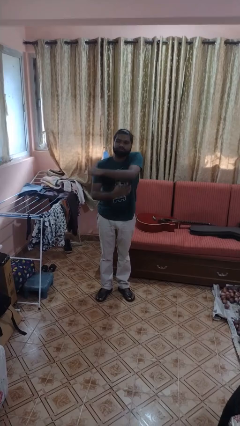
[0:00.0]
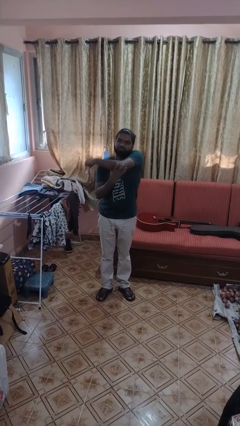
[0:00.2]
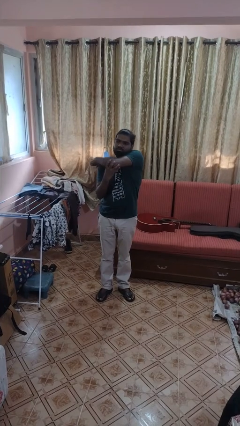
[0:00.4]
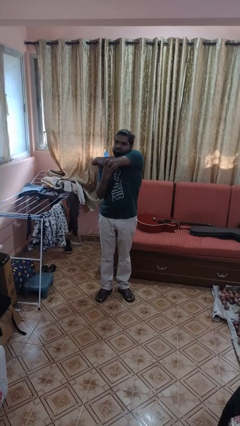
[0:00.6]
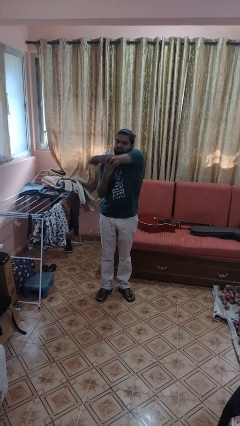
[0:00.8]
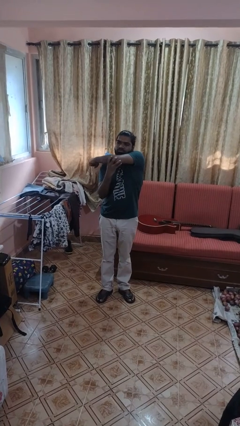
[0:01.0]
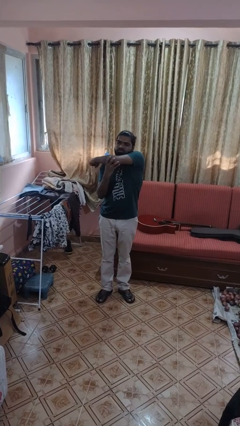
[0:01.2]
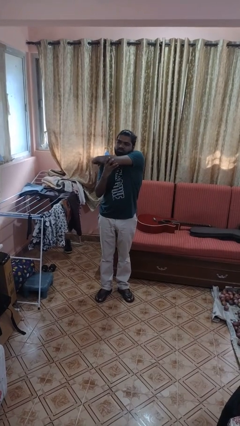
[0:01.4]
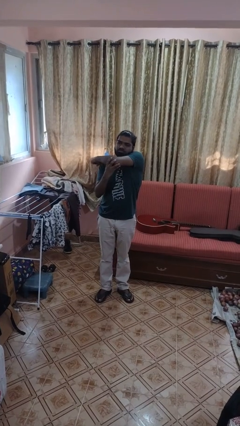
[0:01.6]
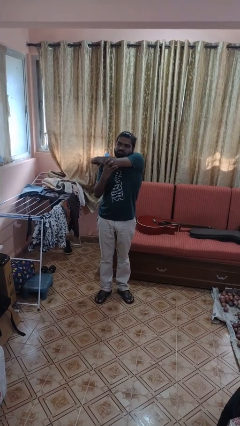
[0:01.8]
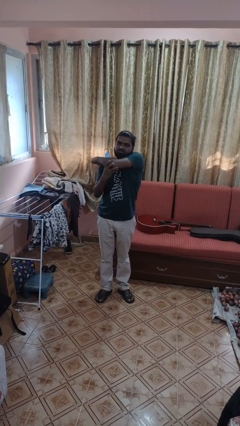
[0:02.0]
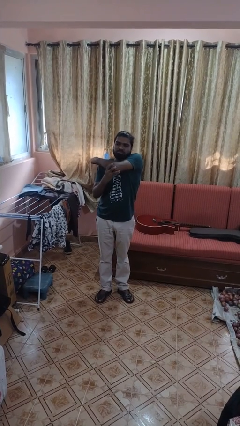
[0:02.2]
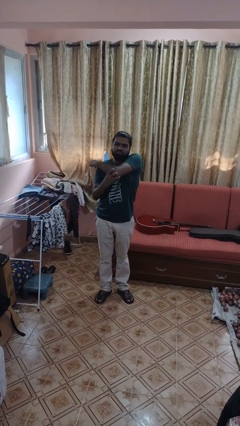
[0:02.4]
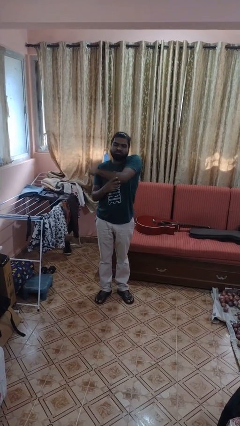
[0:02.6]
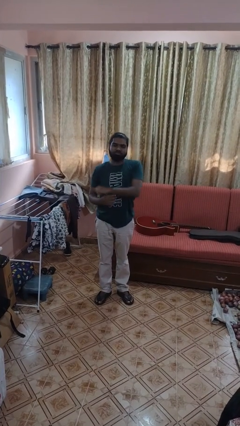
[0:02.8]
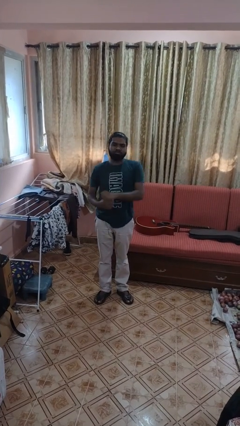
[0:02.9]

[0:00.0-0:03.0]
person stretches arms to side

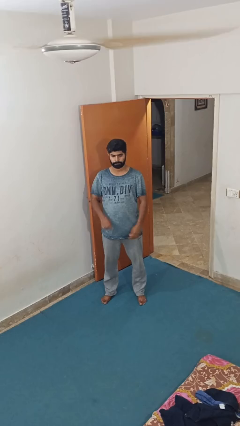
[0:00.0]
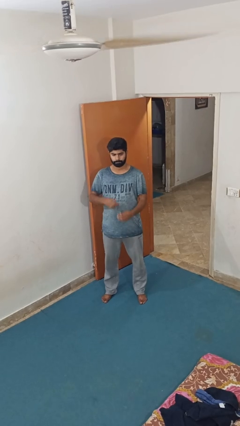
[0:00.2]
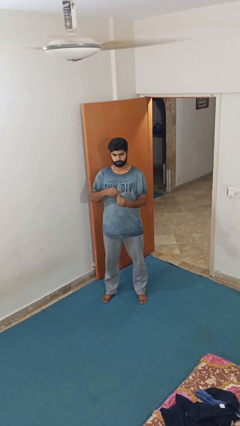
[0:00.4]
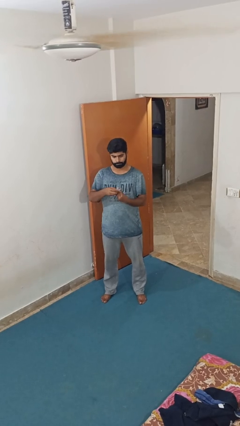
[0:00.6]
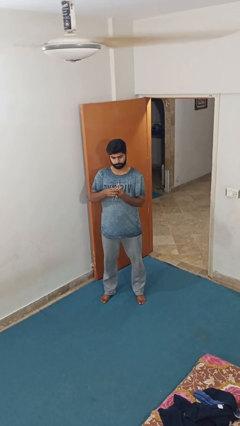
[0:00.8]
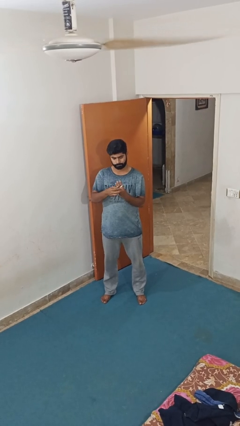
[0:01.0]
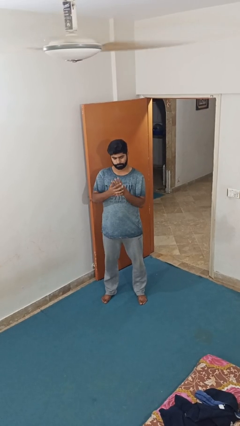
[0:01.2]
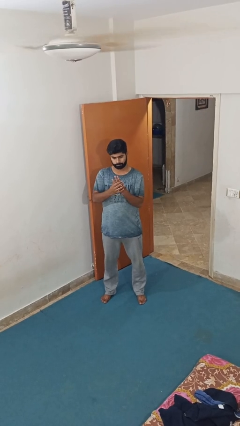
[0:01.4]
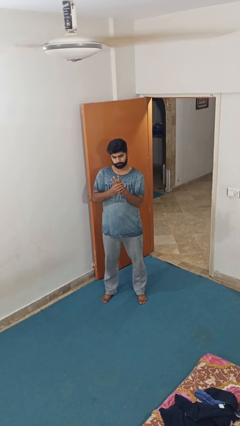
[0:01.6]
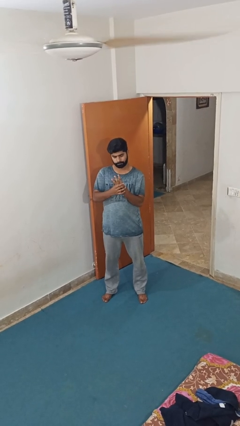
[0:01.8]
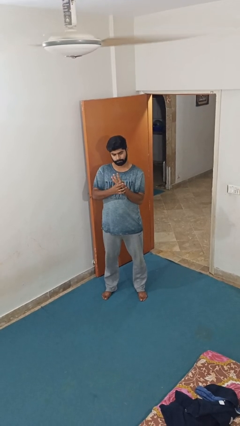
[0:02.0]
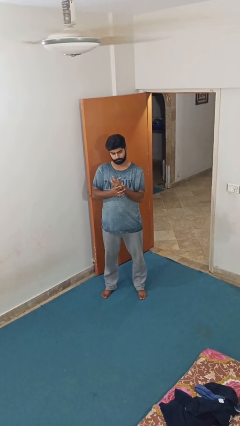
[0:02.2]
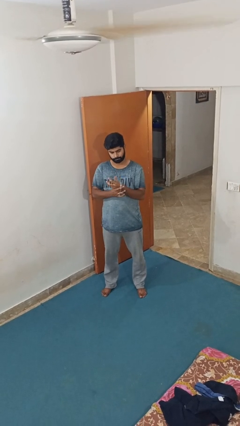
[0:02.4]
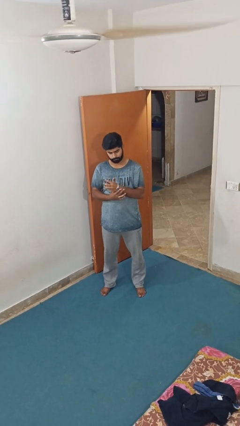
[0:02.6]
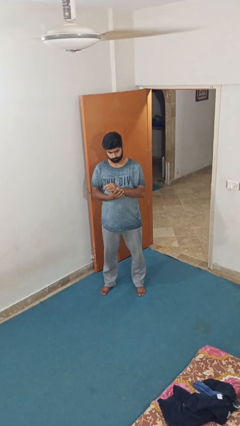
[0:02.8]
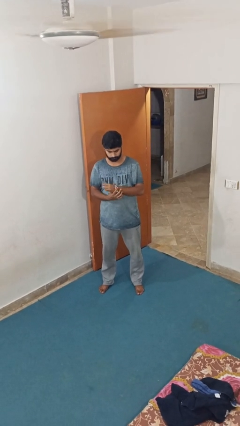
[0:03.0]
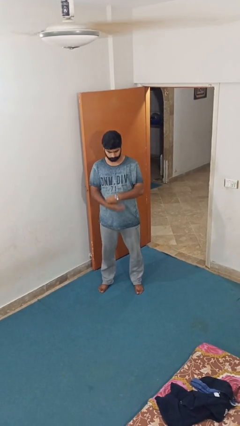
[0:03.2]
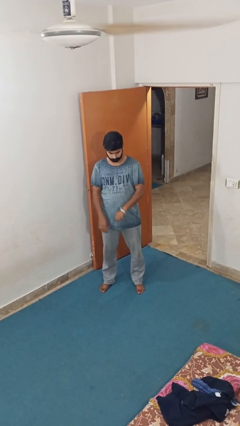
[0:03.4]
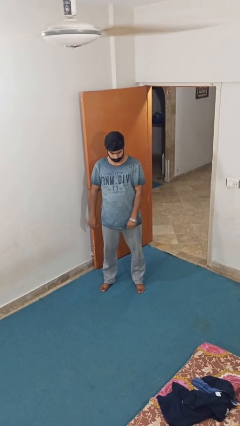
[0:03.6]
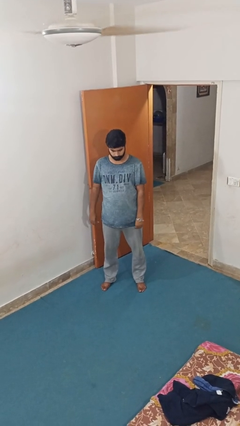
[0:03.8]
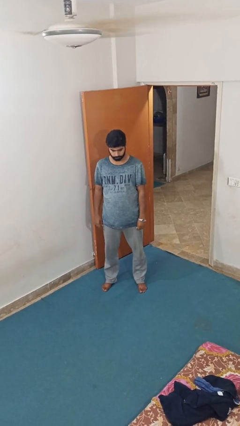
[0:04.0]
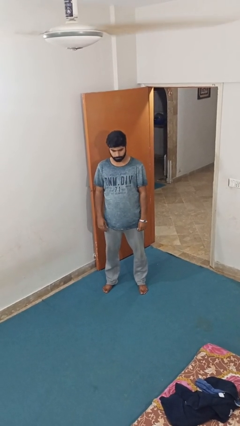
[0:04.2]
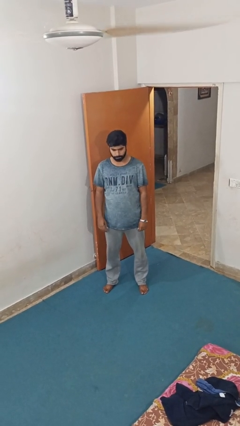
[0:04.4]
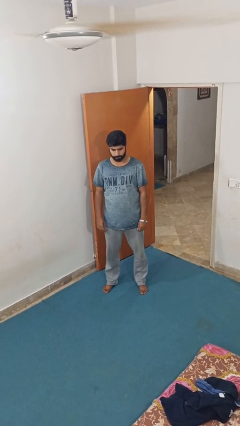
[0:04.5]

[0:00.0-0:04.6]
person puts on wristwatch

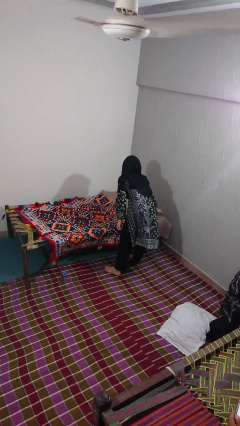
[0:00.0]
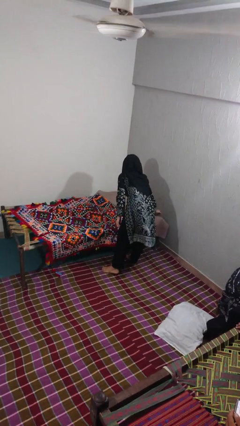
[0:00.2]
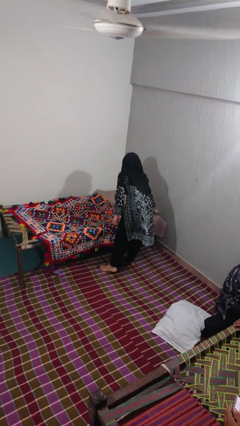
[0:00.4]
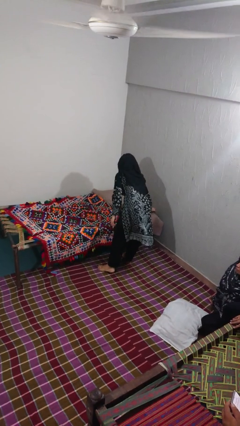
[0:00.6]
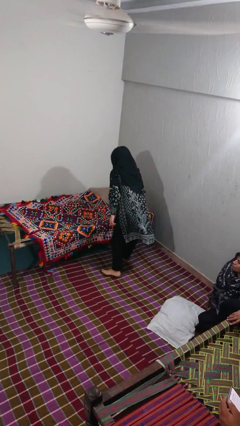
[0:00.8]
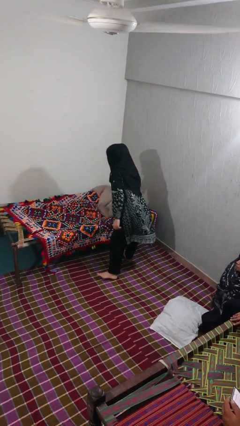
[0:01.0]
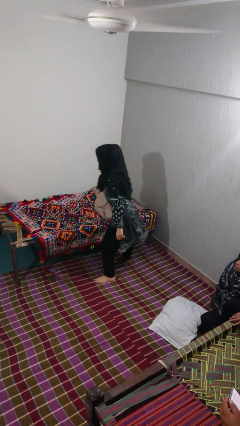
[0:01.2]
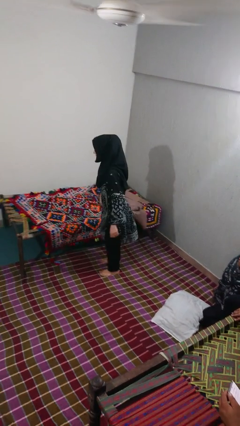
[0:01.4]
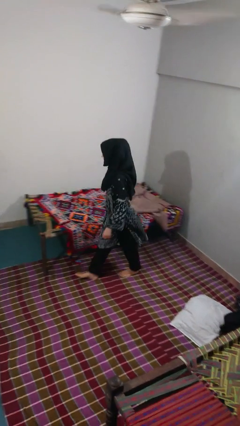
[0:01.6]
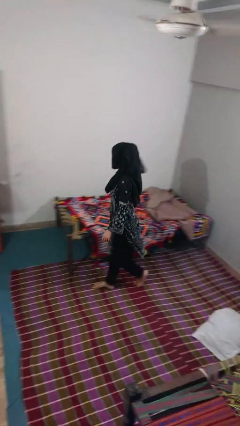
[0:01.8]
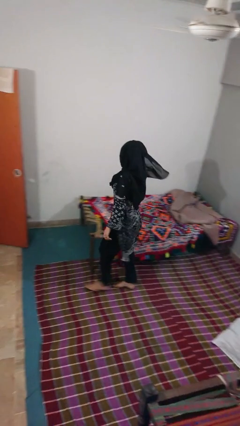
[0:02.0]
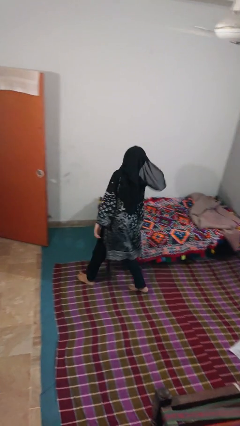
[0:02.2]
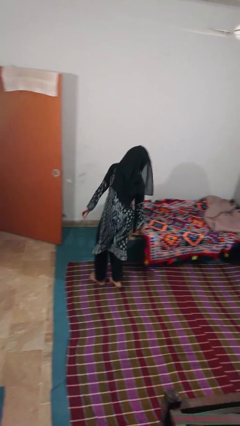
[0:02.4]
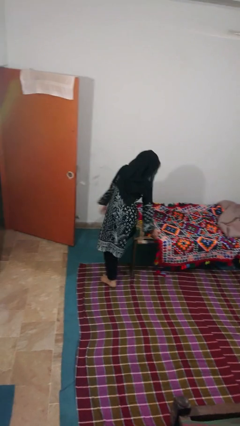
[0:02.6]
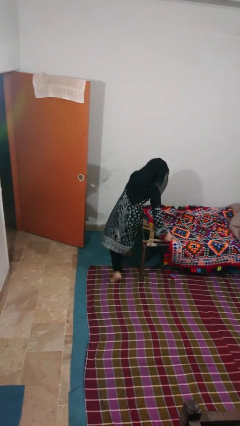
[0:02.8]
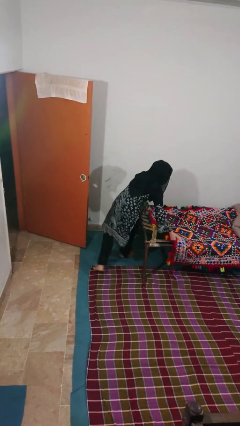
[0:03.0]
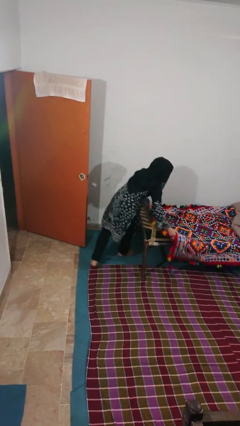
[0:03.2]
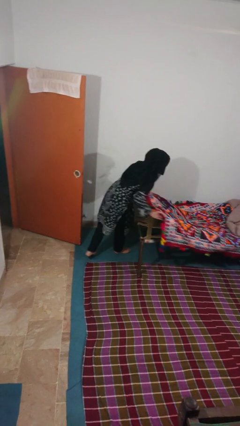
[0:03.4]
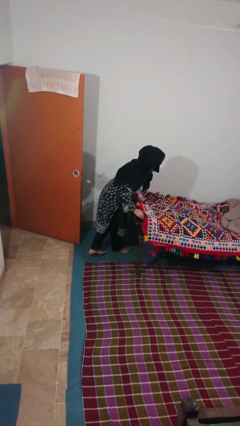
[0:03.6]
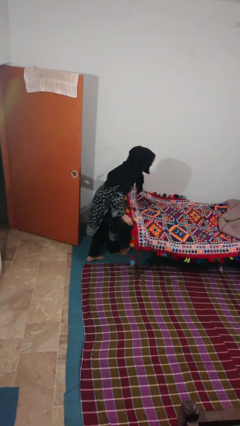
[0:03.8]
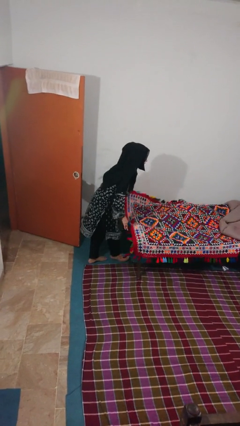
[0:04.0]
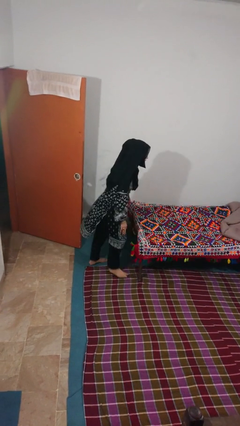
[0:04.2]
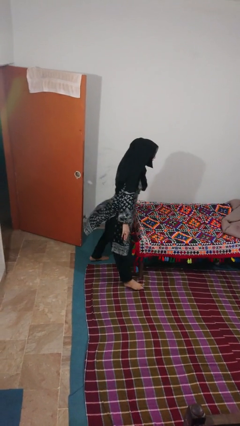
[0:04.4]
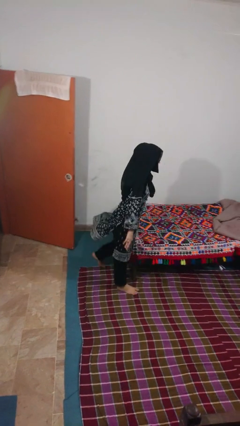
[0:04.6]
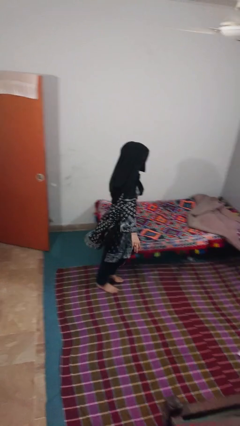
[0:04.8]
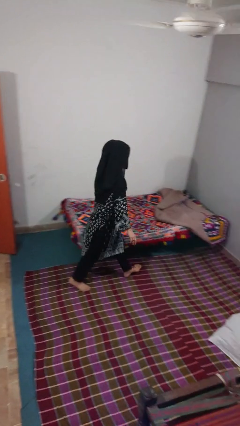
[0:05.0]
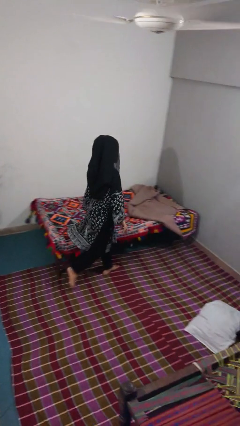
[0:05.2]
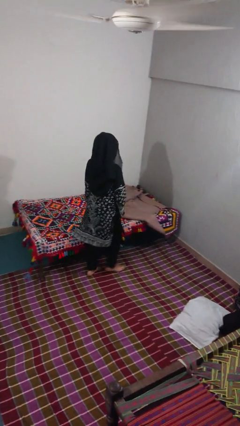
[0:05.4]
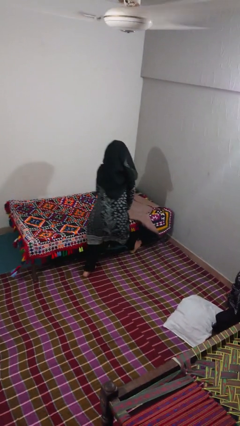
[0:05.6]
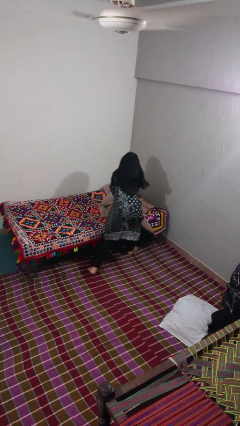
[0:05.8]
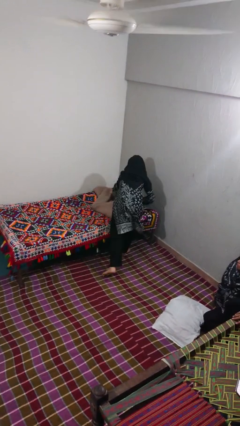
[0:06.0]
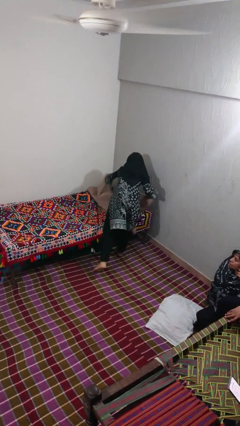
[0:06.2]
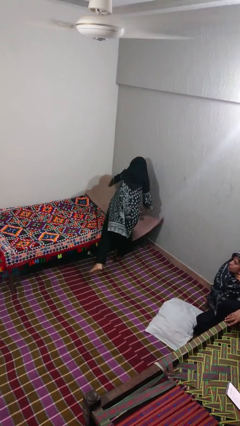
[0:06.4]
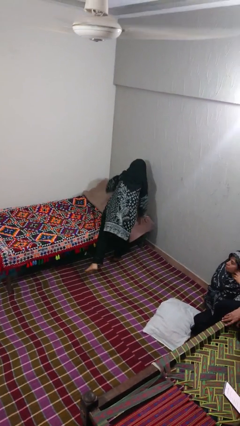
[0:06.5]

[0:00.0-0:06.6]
person makes bed

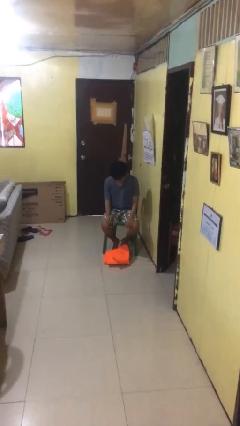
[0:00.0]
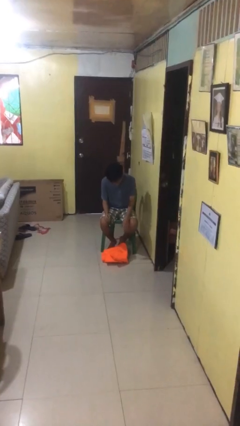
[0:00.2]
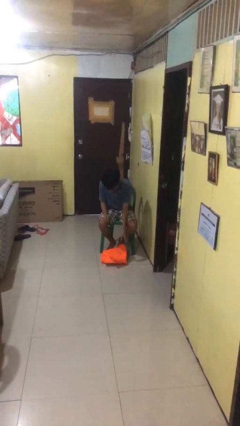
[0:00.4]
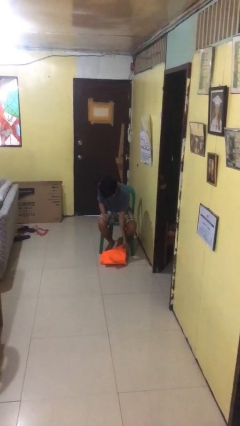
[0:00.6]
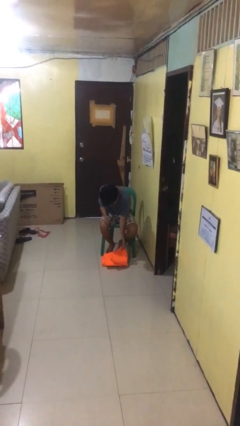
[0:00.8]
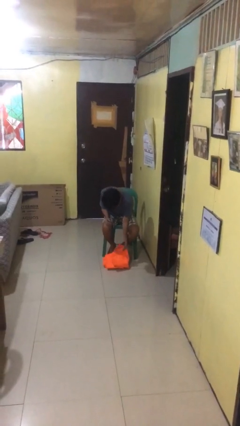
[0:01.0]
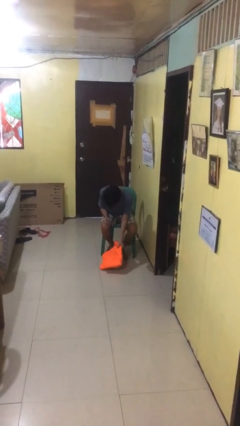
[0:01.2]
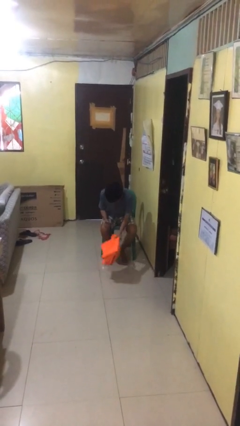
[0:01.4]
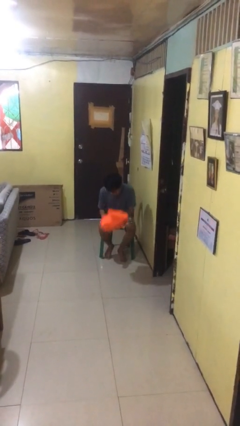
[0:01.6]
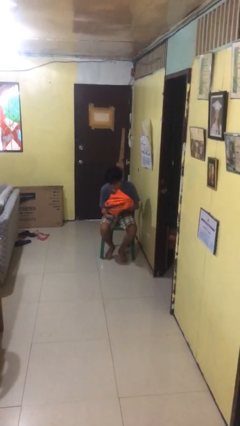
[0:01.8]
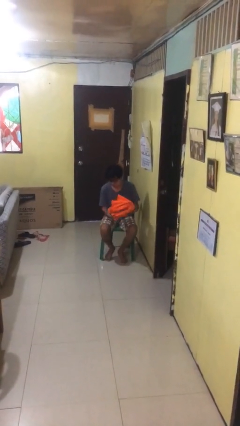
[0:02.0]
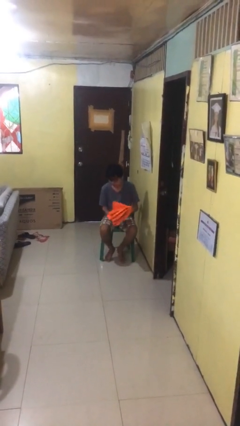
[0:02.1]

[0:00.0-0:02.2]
person picks up object from floor

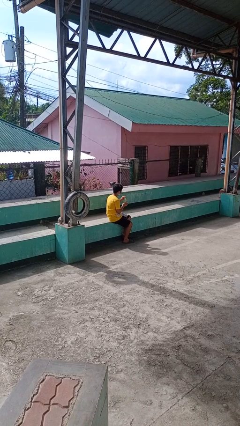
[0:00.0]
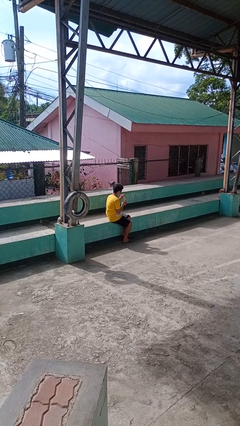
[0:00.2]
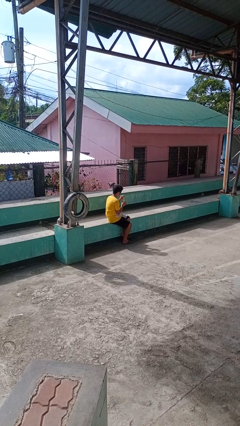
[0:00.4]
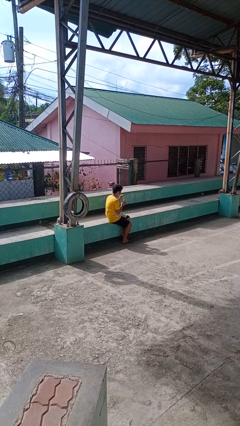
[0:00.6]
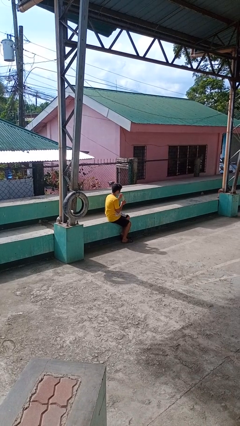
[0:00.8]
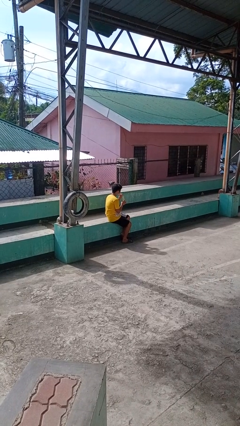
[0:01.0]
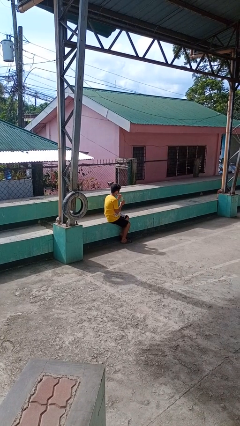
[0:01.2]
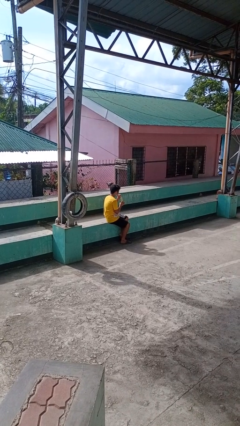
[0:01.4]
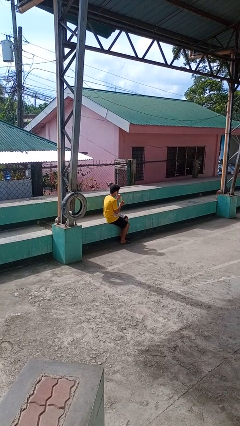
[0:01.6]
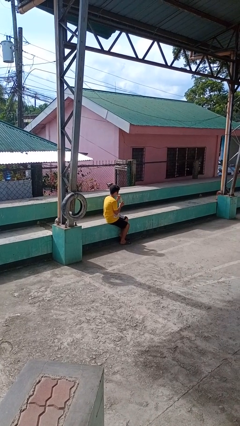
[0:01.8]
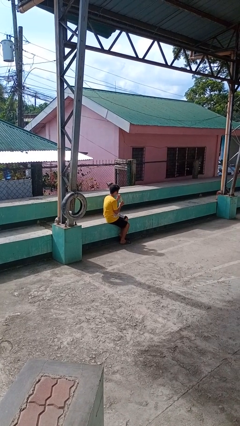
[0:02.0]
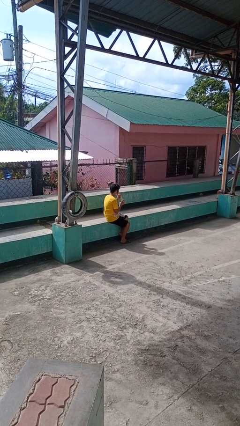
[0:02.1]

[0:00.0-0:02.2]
person drinks from straw
